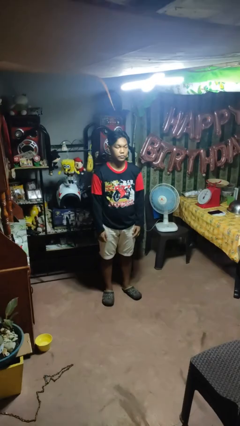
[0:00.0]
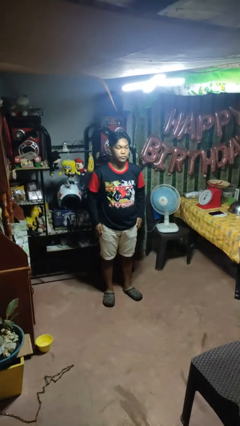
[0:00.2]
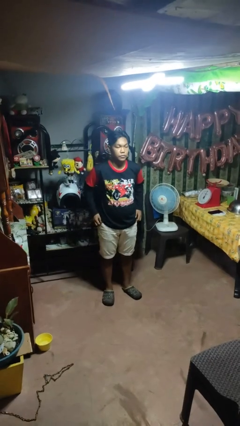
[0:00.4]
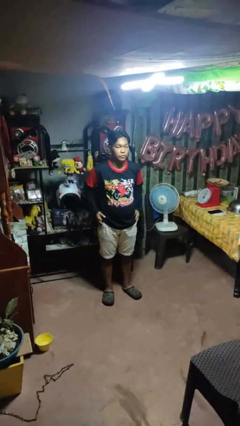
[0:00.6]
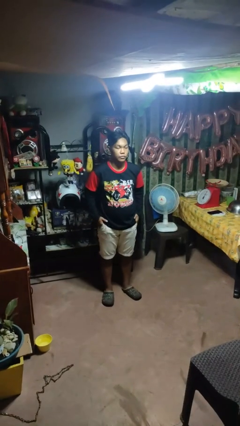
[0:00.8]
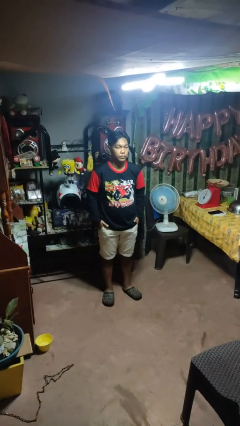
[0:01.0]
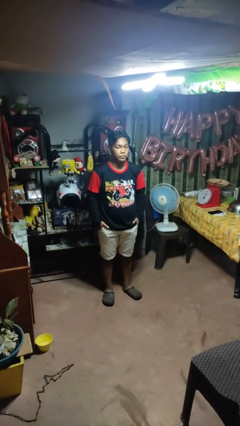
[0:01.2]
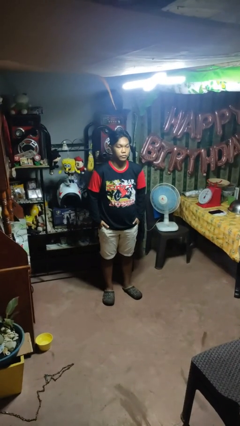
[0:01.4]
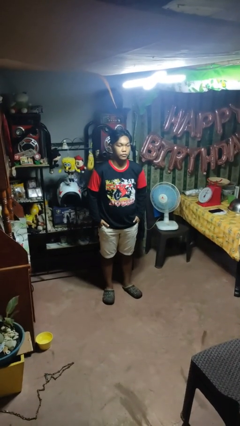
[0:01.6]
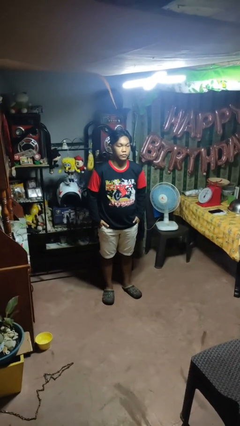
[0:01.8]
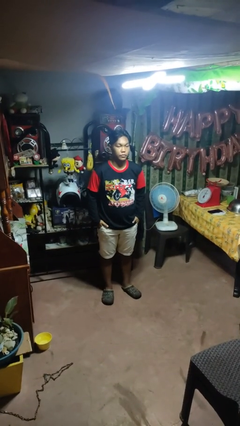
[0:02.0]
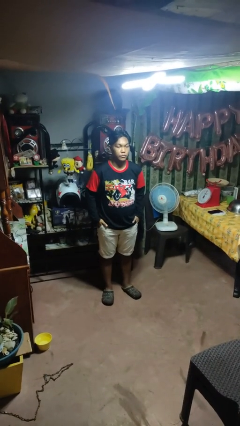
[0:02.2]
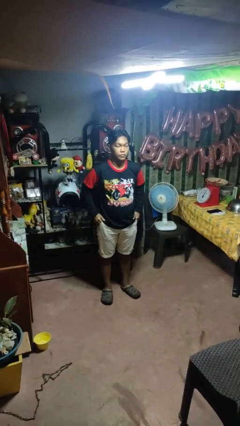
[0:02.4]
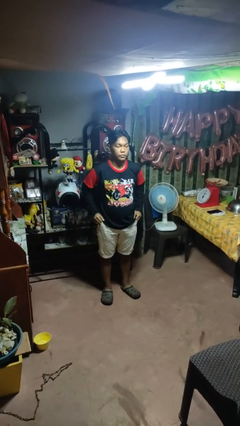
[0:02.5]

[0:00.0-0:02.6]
person puts hands in back pockets

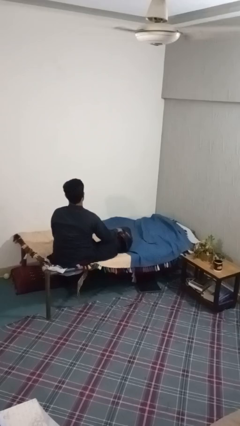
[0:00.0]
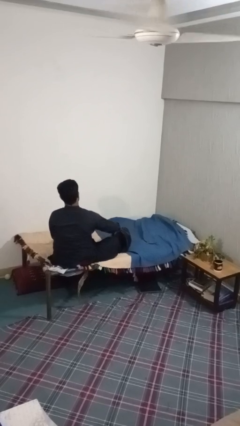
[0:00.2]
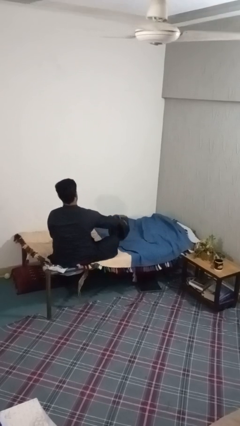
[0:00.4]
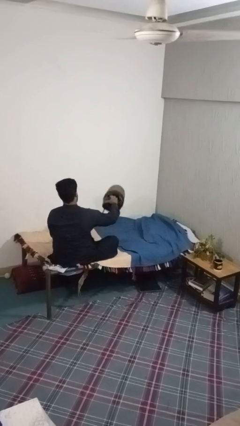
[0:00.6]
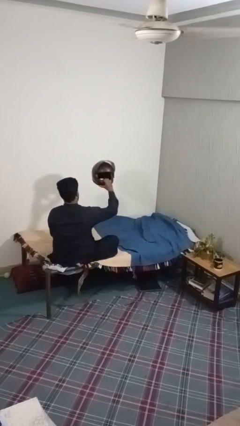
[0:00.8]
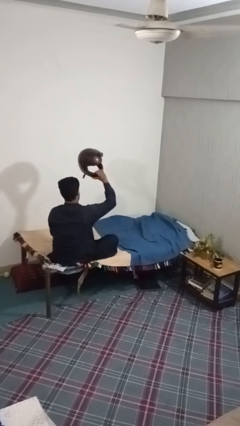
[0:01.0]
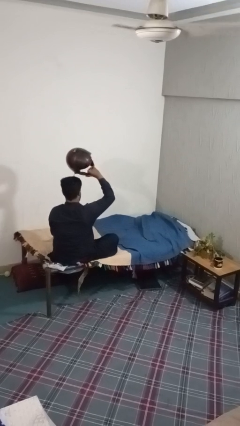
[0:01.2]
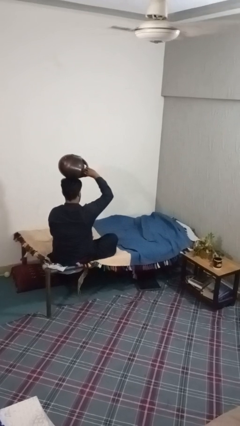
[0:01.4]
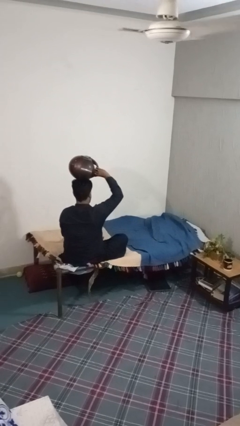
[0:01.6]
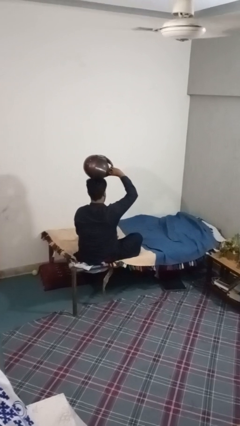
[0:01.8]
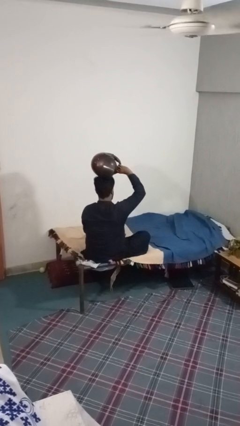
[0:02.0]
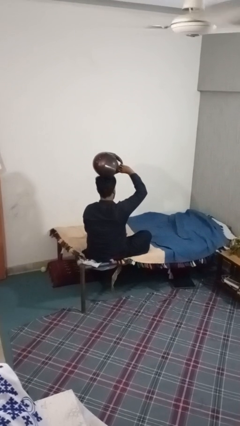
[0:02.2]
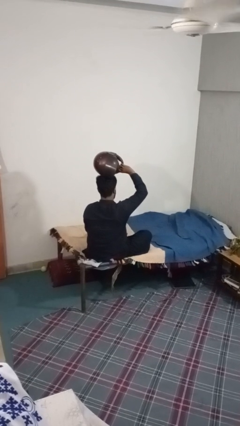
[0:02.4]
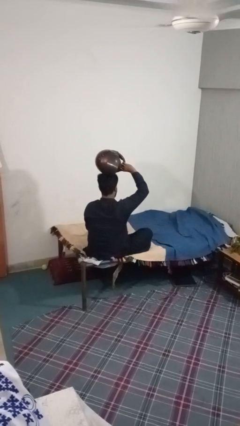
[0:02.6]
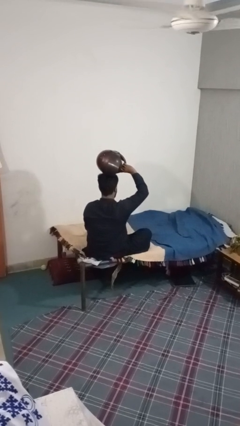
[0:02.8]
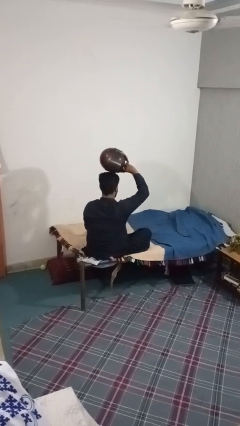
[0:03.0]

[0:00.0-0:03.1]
person holds object above head

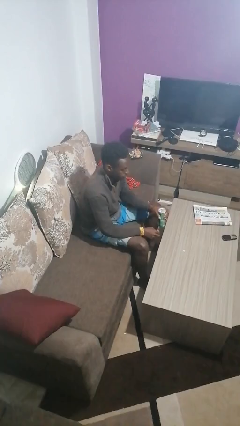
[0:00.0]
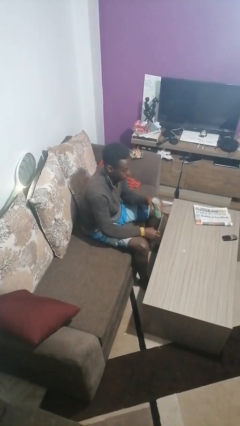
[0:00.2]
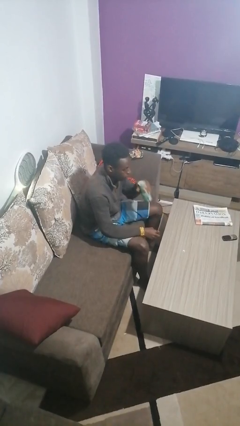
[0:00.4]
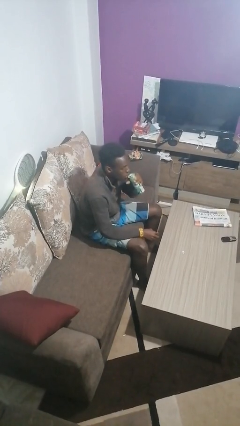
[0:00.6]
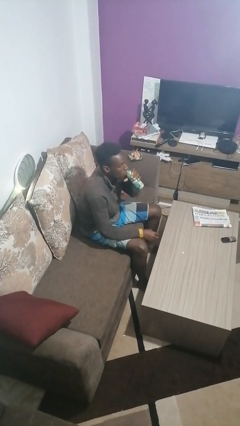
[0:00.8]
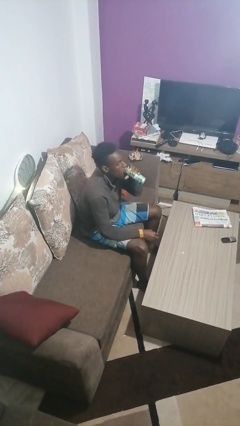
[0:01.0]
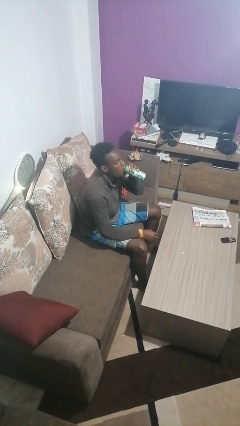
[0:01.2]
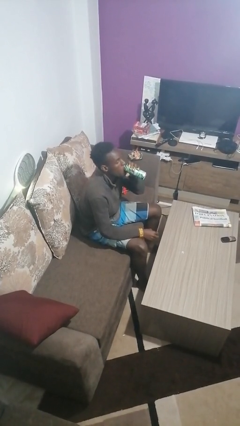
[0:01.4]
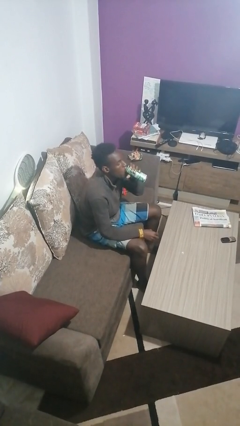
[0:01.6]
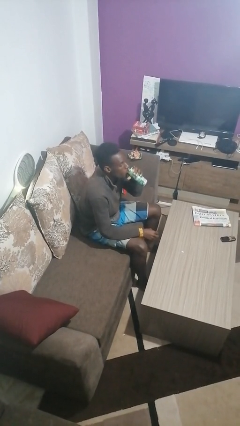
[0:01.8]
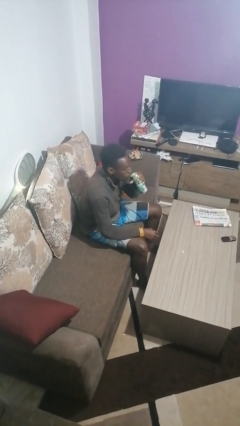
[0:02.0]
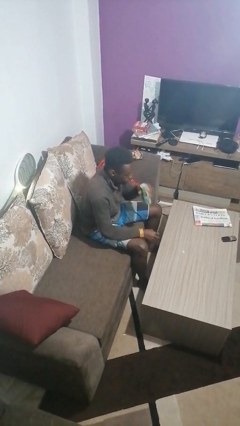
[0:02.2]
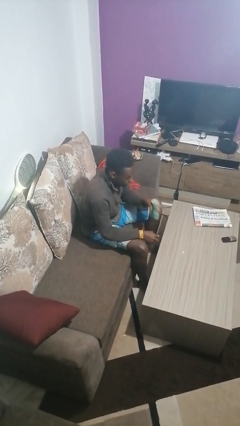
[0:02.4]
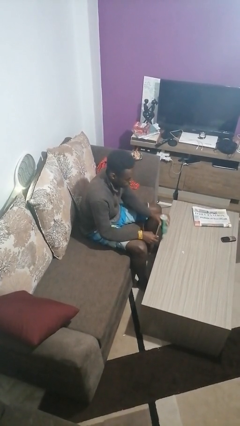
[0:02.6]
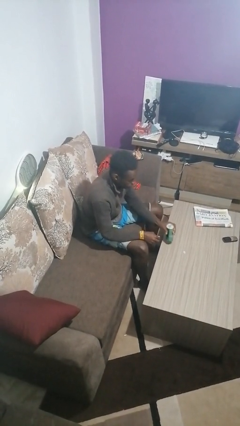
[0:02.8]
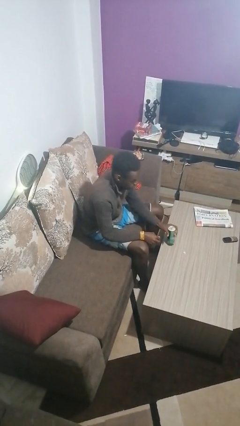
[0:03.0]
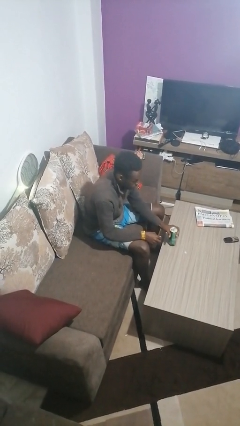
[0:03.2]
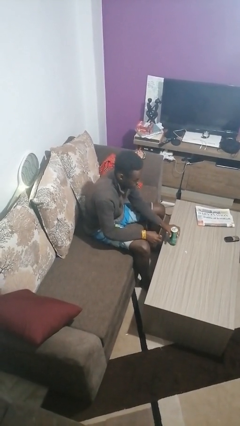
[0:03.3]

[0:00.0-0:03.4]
person drinks from beverage can

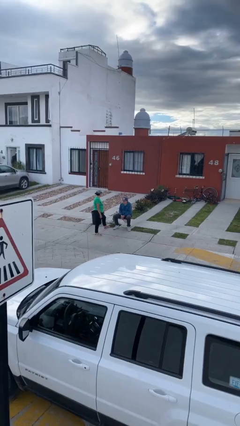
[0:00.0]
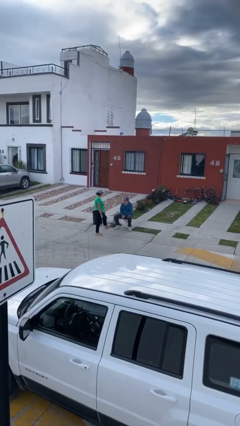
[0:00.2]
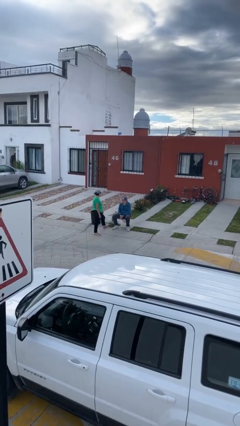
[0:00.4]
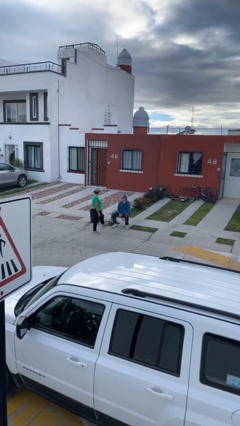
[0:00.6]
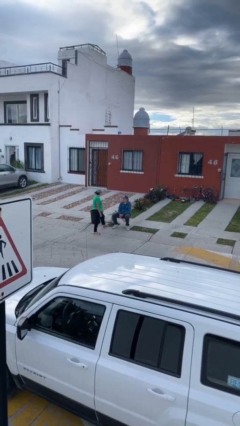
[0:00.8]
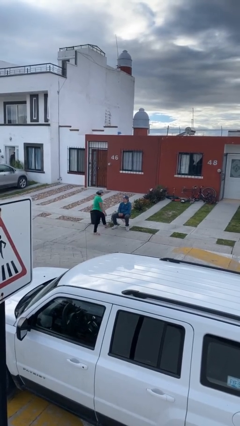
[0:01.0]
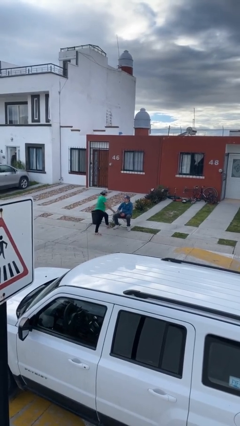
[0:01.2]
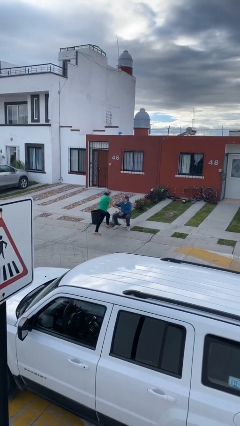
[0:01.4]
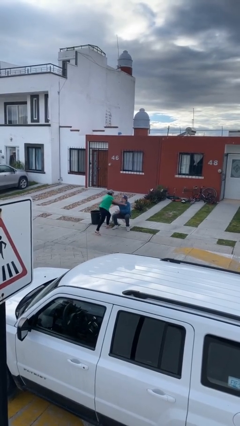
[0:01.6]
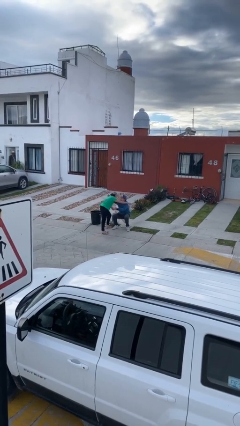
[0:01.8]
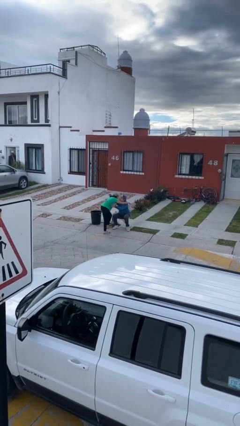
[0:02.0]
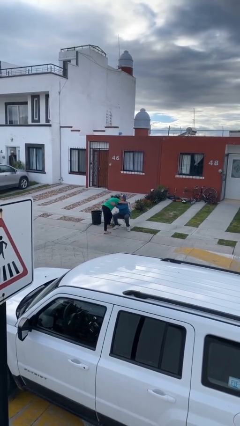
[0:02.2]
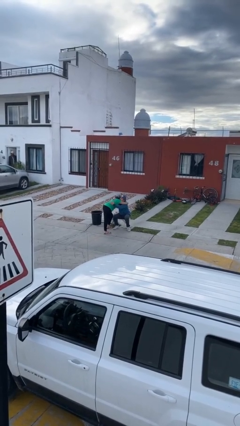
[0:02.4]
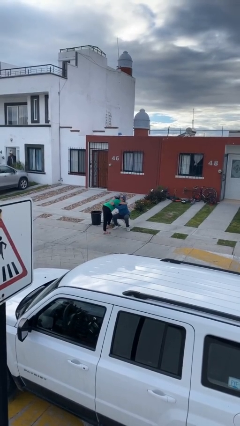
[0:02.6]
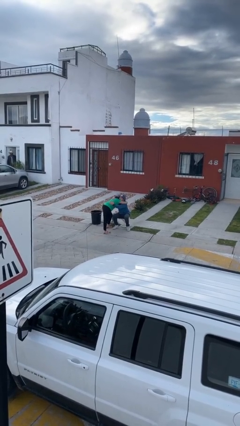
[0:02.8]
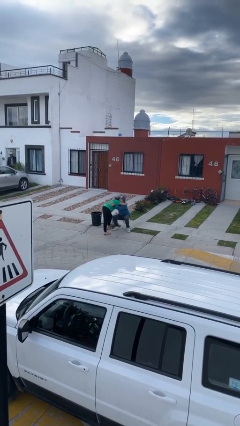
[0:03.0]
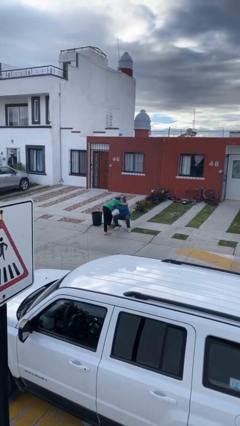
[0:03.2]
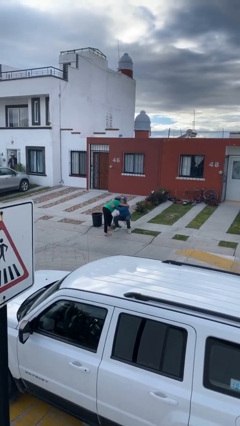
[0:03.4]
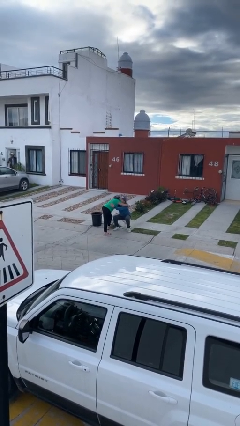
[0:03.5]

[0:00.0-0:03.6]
person embraces person

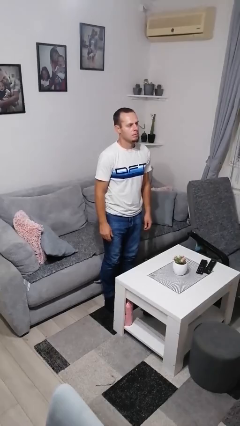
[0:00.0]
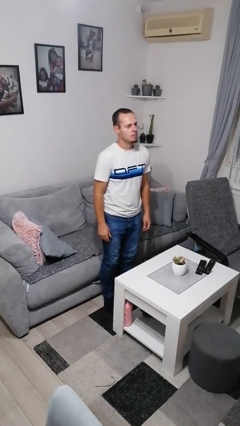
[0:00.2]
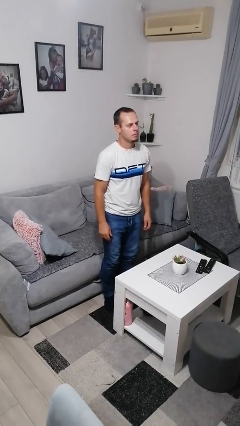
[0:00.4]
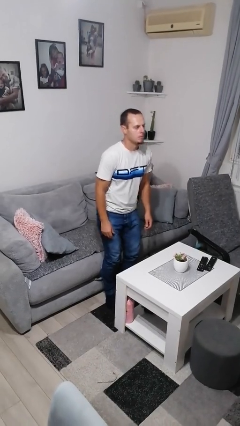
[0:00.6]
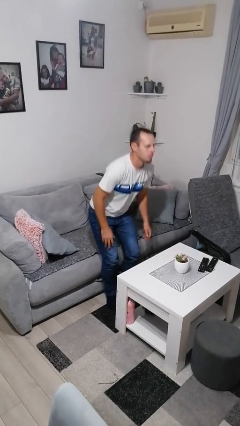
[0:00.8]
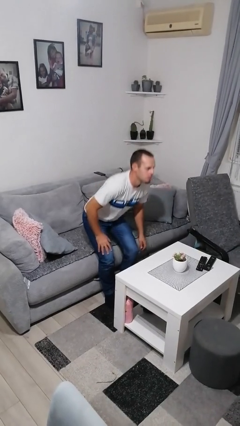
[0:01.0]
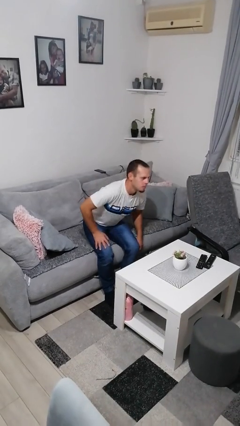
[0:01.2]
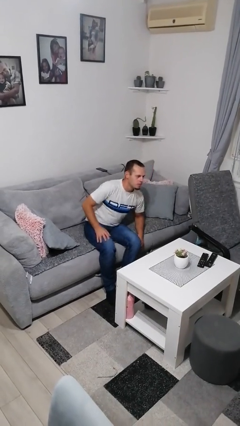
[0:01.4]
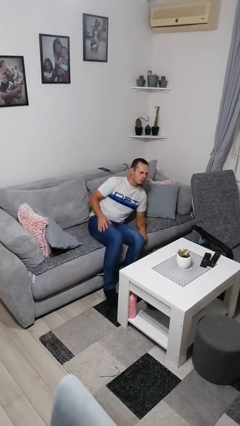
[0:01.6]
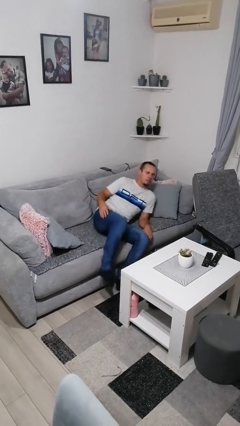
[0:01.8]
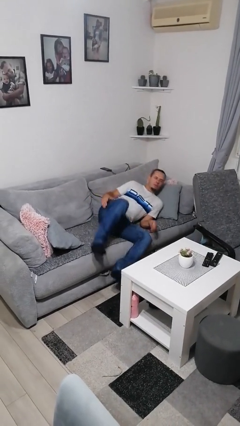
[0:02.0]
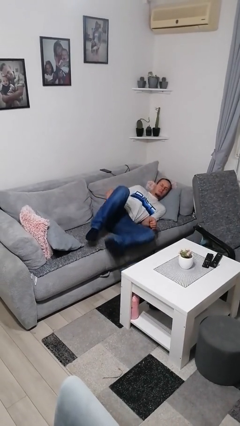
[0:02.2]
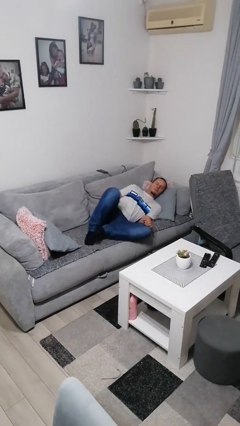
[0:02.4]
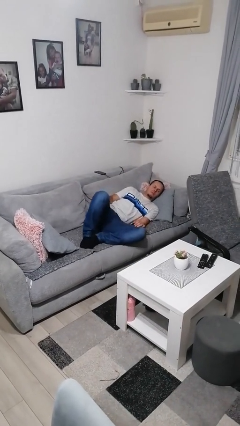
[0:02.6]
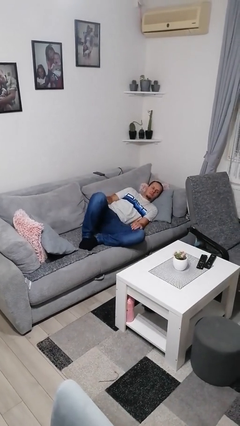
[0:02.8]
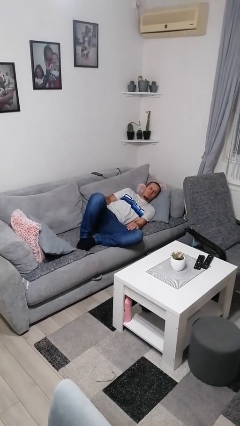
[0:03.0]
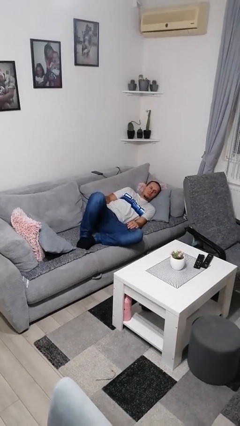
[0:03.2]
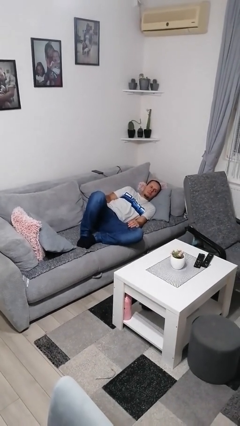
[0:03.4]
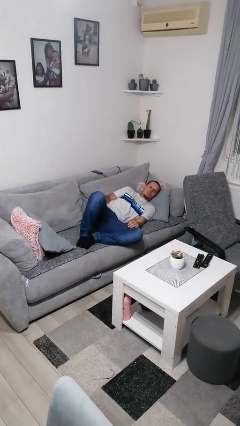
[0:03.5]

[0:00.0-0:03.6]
person lies down on couch

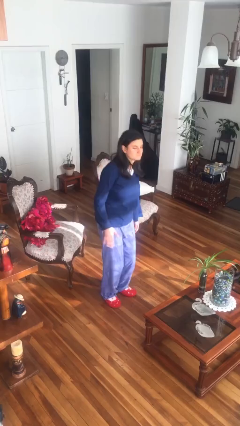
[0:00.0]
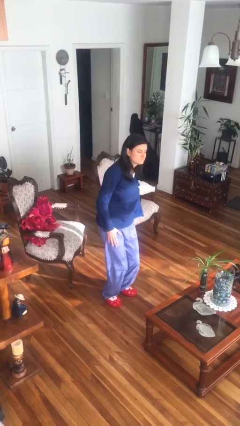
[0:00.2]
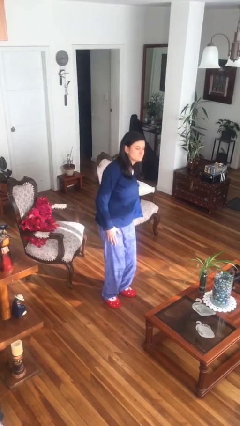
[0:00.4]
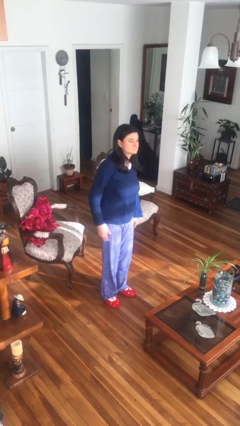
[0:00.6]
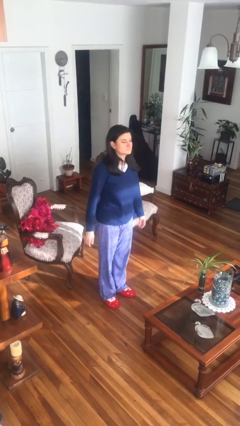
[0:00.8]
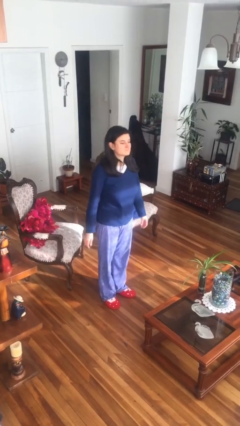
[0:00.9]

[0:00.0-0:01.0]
person slaps hands on thighs

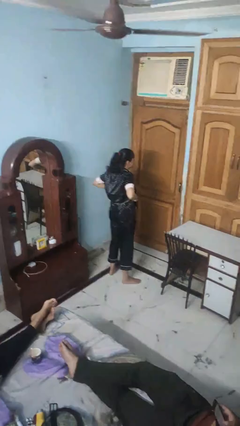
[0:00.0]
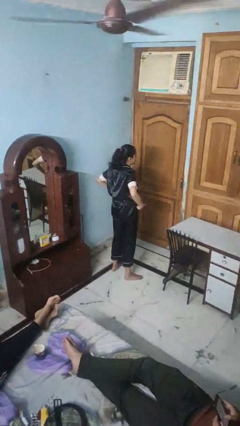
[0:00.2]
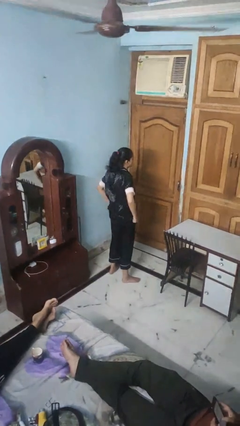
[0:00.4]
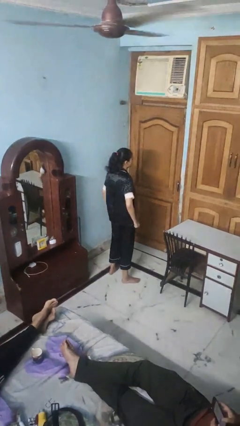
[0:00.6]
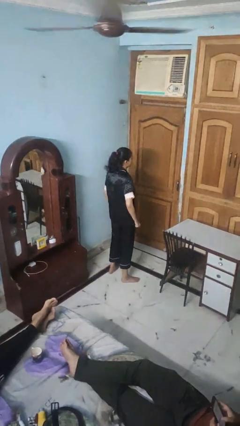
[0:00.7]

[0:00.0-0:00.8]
person hikes up pants
